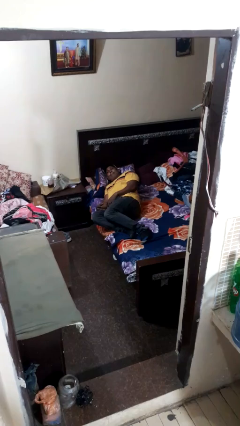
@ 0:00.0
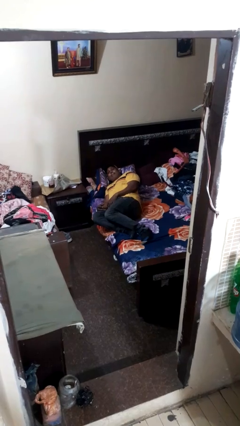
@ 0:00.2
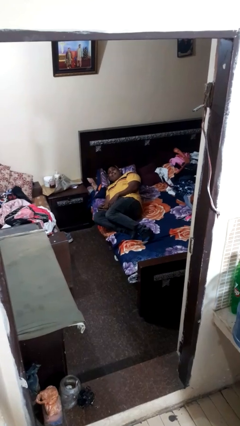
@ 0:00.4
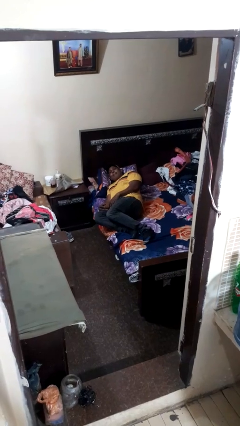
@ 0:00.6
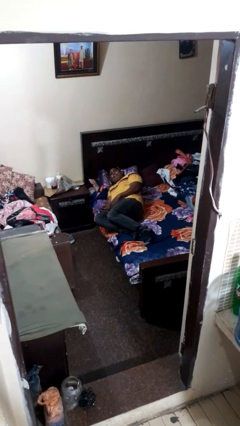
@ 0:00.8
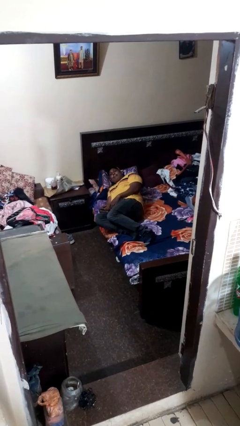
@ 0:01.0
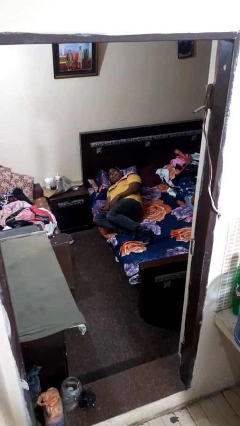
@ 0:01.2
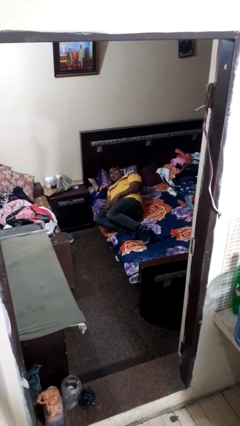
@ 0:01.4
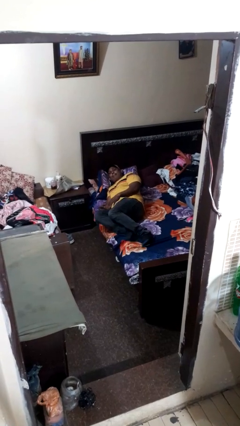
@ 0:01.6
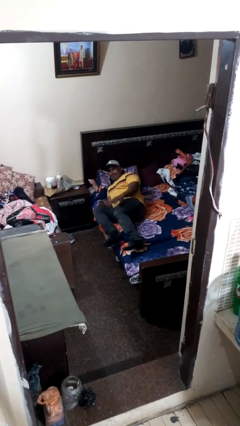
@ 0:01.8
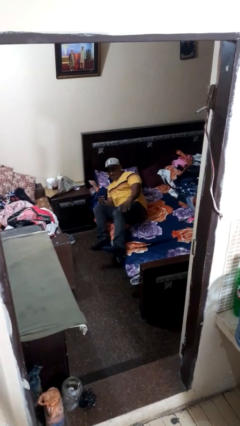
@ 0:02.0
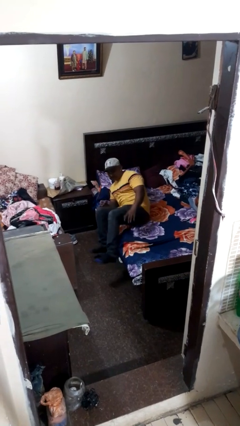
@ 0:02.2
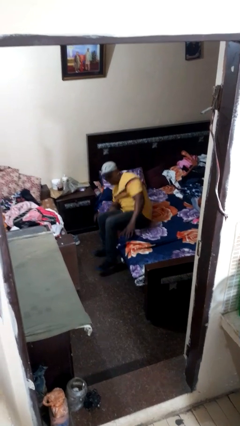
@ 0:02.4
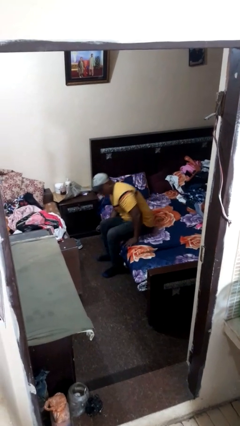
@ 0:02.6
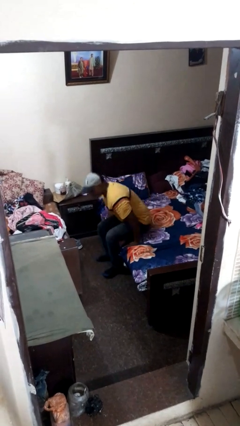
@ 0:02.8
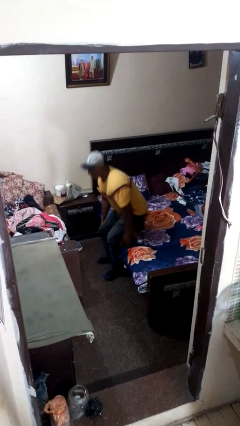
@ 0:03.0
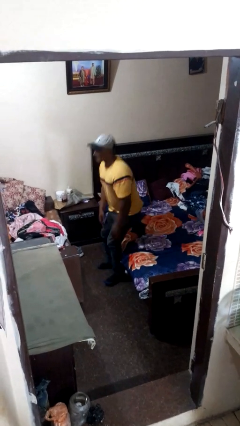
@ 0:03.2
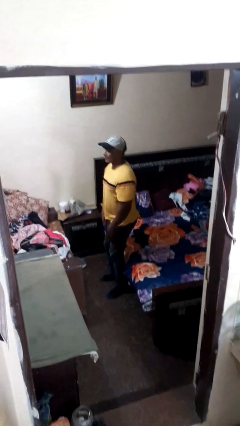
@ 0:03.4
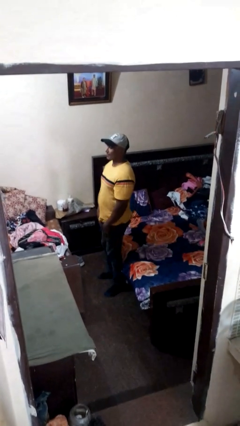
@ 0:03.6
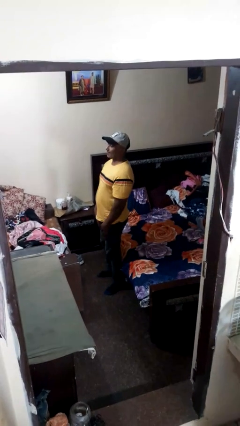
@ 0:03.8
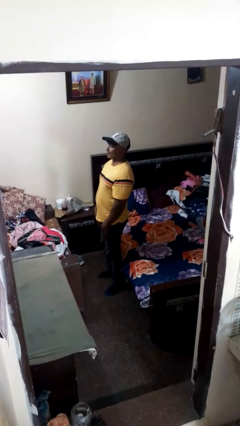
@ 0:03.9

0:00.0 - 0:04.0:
person stands up

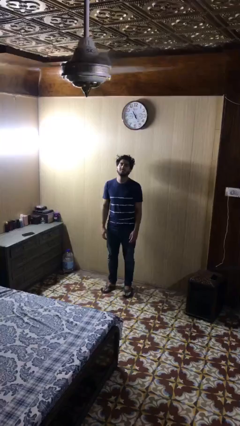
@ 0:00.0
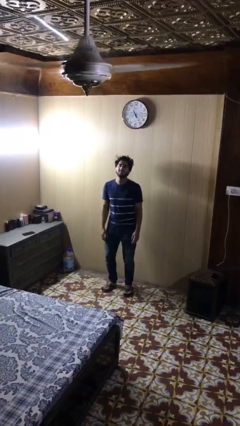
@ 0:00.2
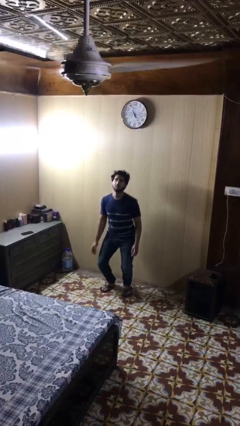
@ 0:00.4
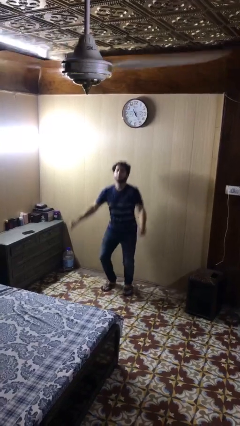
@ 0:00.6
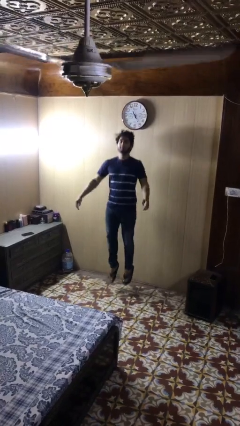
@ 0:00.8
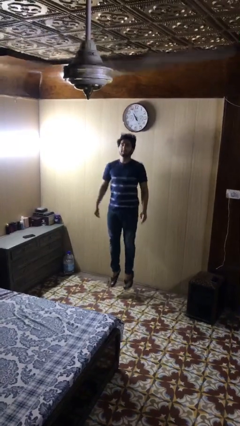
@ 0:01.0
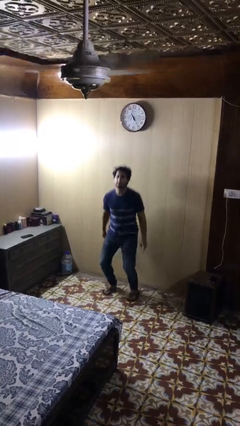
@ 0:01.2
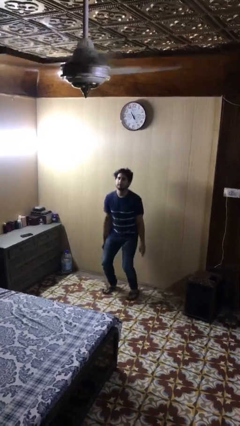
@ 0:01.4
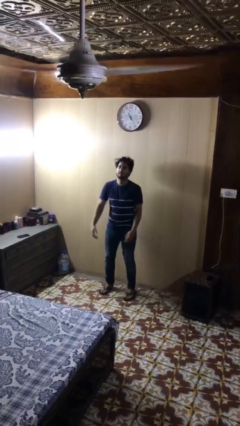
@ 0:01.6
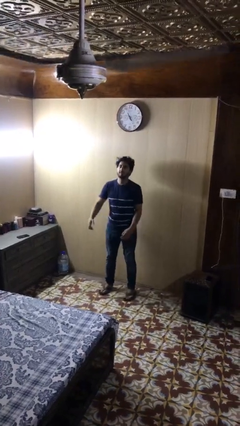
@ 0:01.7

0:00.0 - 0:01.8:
person jumps

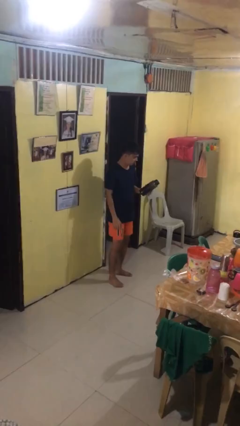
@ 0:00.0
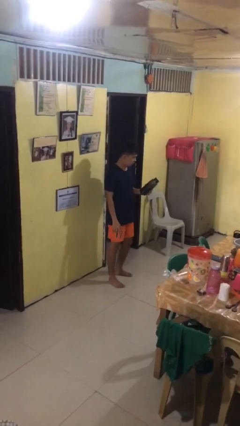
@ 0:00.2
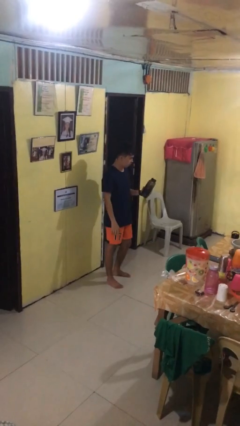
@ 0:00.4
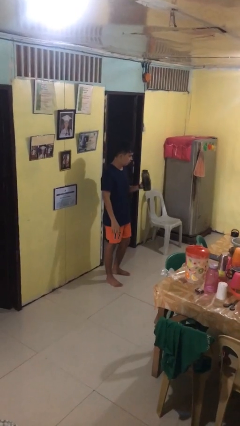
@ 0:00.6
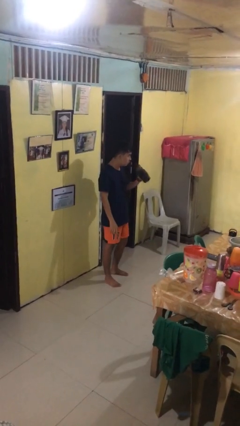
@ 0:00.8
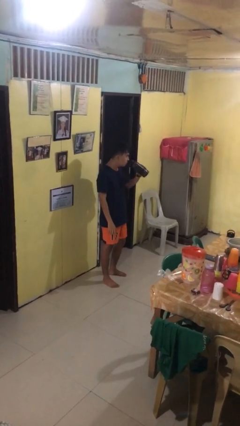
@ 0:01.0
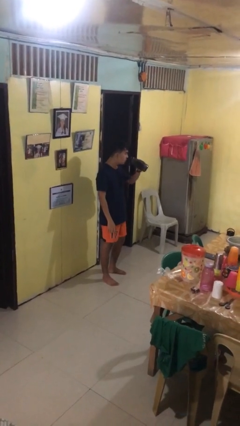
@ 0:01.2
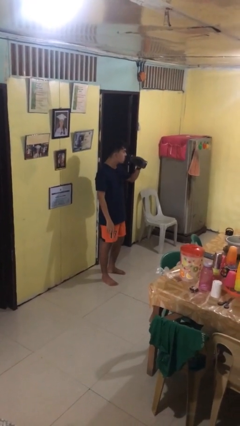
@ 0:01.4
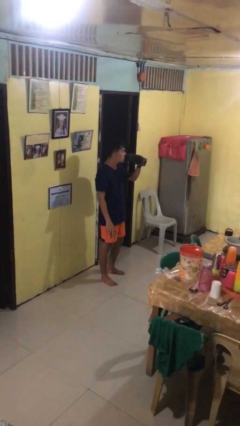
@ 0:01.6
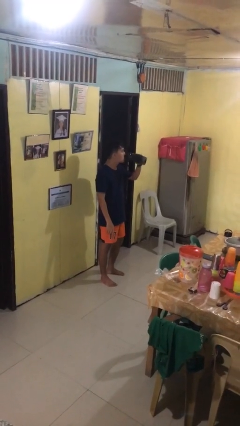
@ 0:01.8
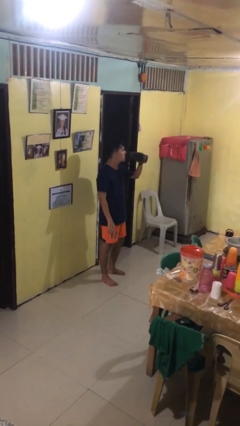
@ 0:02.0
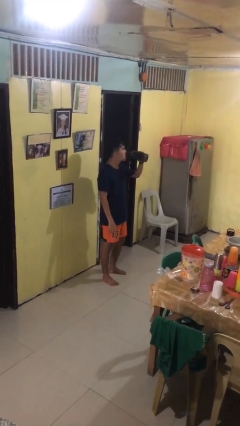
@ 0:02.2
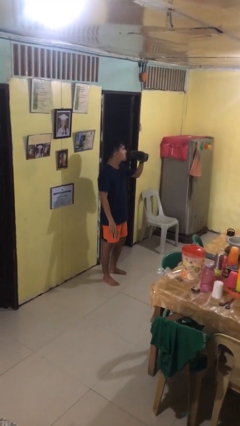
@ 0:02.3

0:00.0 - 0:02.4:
person drinks from bottle

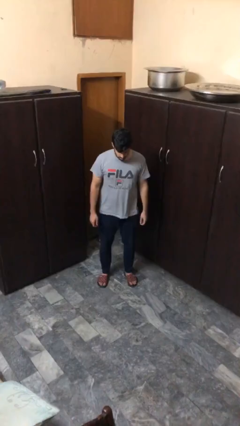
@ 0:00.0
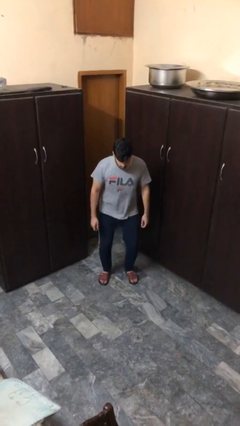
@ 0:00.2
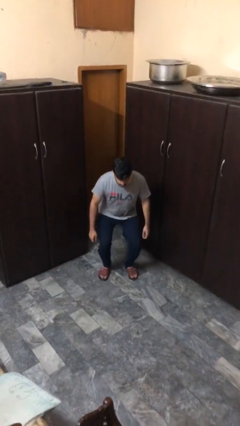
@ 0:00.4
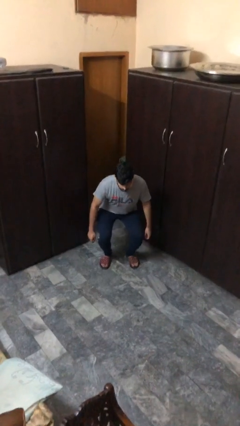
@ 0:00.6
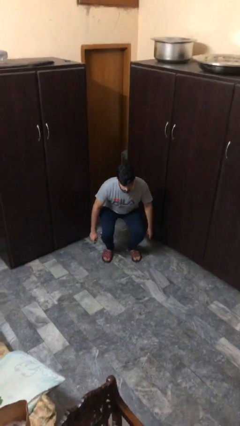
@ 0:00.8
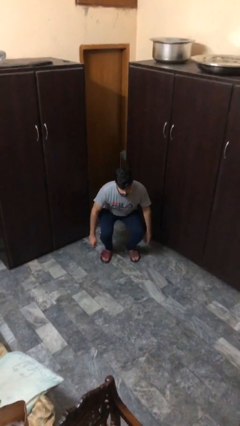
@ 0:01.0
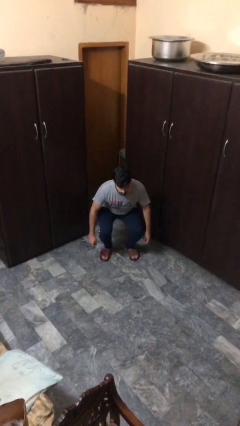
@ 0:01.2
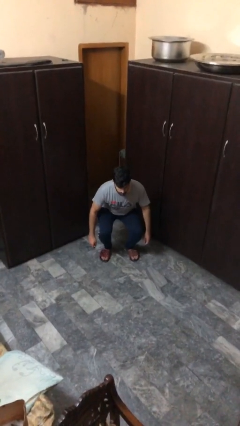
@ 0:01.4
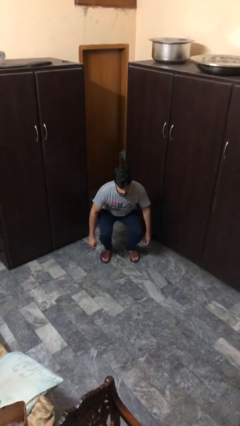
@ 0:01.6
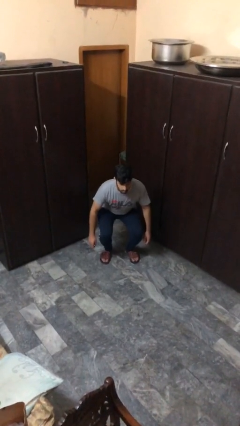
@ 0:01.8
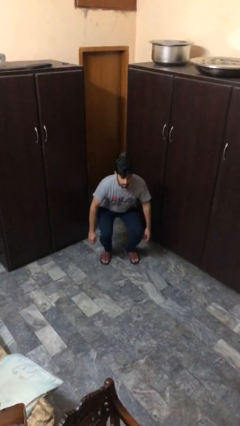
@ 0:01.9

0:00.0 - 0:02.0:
person squats

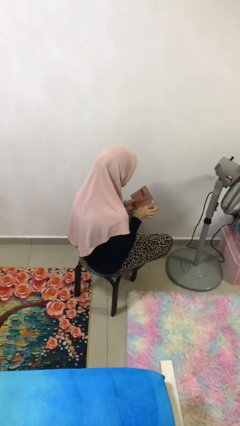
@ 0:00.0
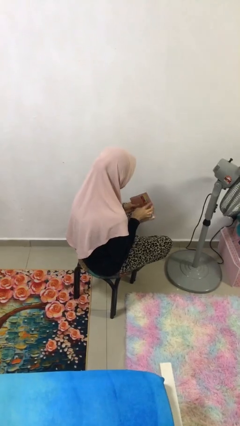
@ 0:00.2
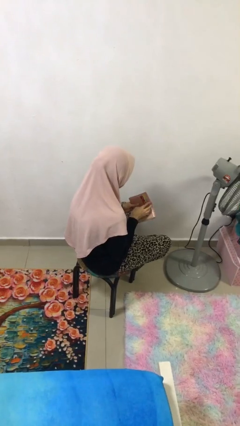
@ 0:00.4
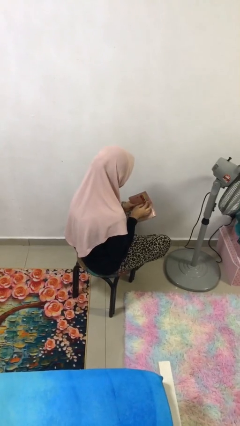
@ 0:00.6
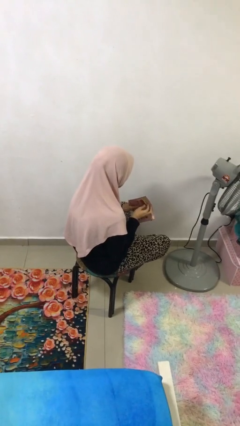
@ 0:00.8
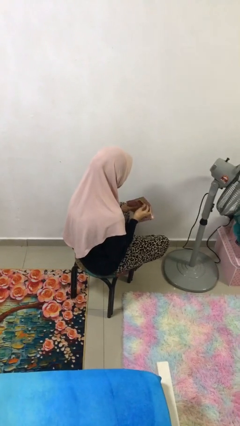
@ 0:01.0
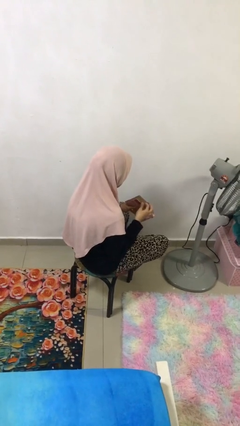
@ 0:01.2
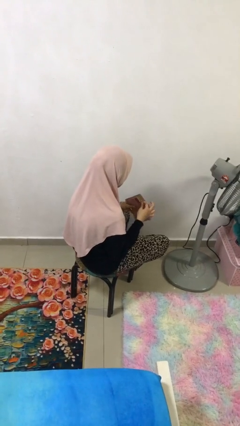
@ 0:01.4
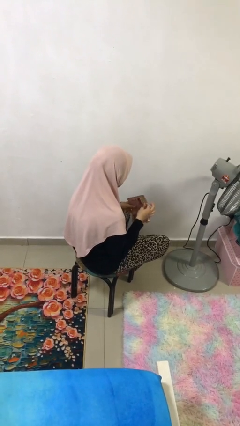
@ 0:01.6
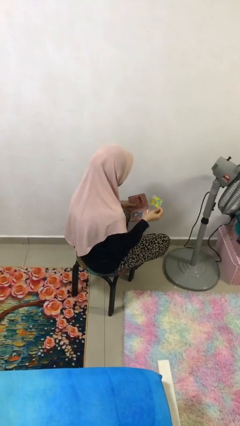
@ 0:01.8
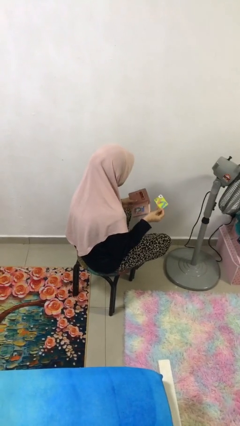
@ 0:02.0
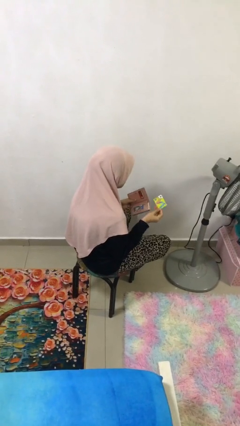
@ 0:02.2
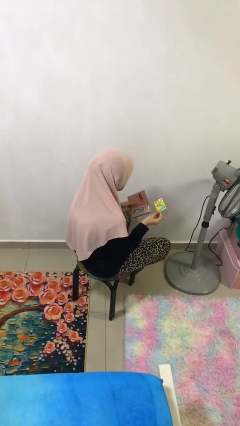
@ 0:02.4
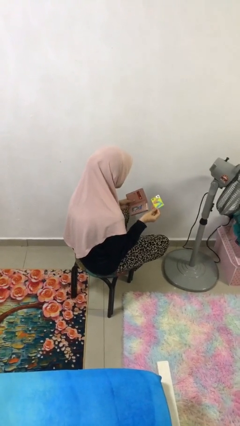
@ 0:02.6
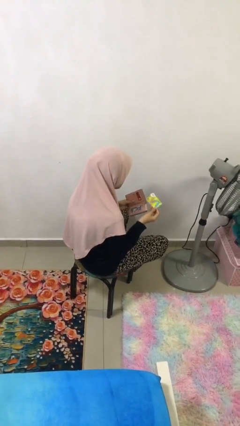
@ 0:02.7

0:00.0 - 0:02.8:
person takes object from purse

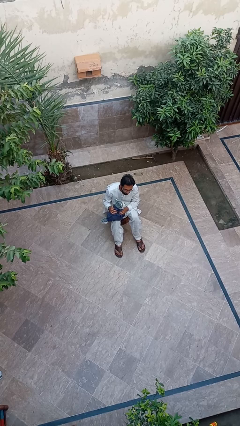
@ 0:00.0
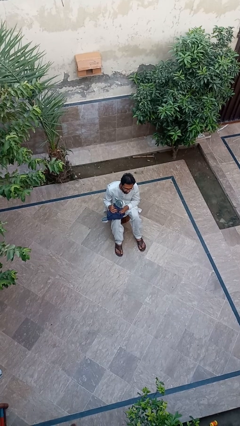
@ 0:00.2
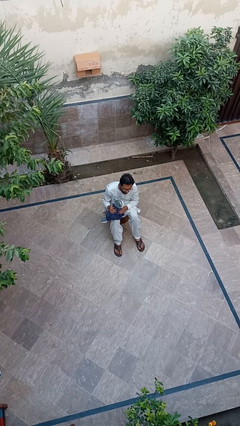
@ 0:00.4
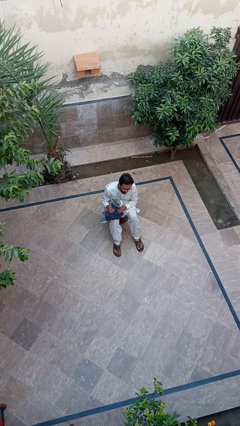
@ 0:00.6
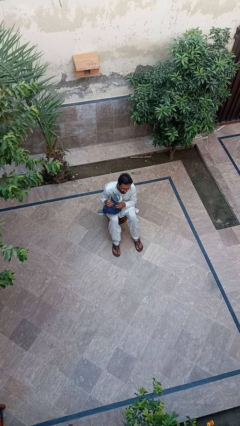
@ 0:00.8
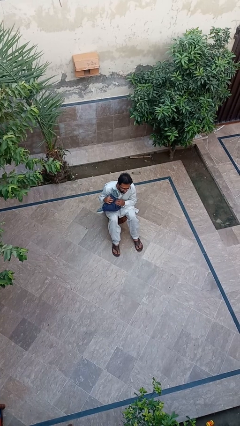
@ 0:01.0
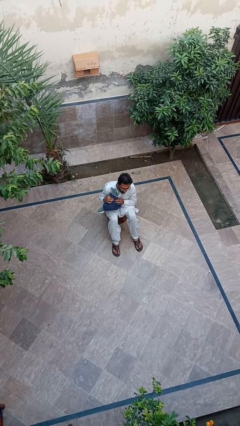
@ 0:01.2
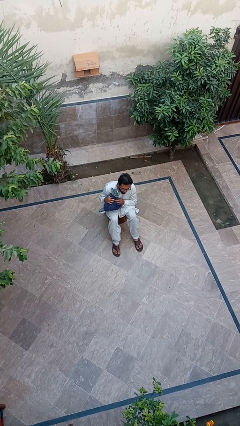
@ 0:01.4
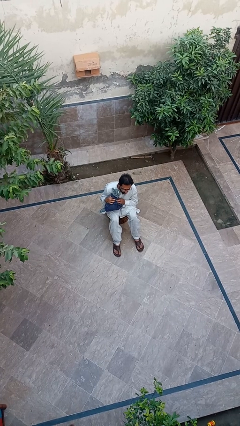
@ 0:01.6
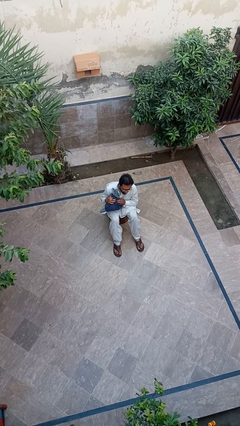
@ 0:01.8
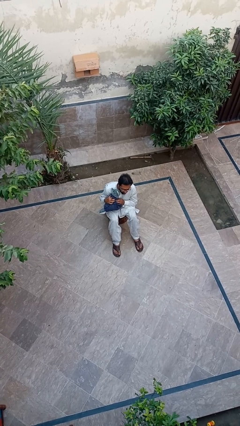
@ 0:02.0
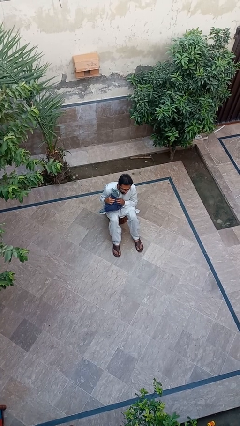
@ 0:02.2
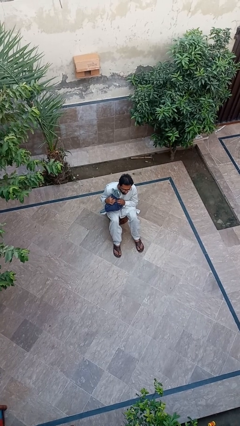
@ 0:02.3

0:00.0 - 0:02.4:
person hugs cat

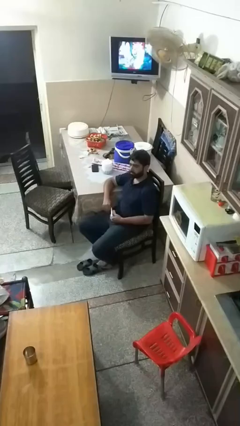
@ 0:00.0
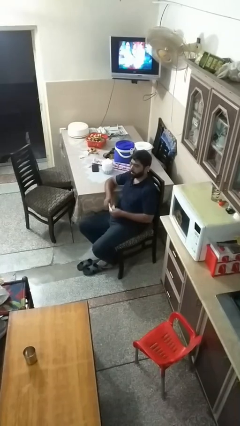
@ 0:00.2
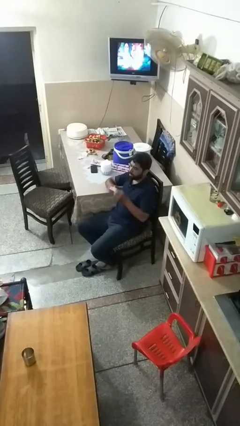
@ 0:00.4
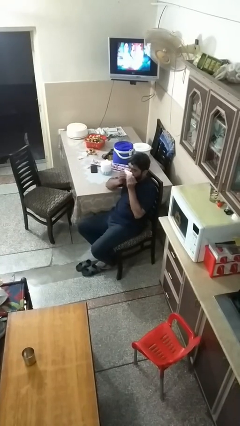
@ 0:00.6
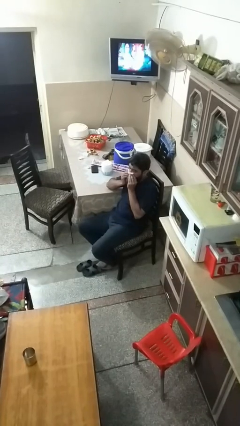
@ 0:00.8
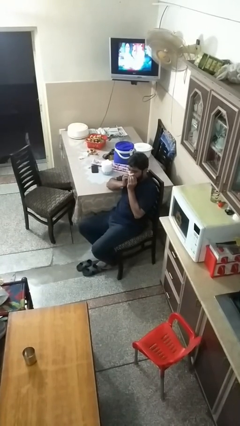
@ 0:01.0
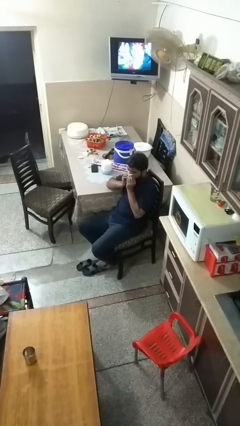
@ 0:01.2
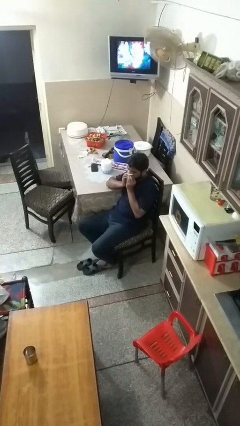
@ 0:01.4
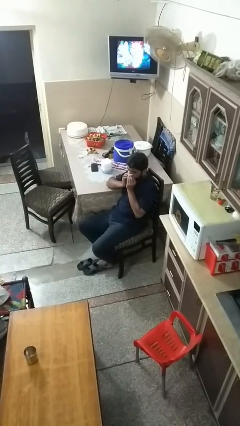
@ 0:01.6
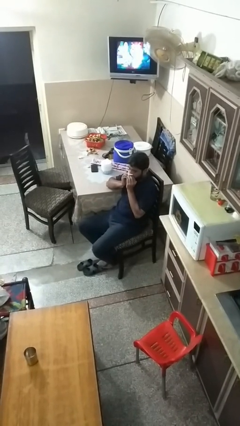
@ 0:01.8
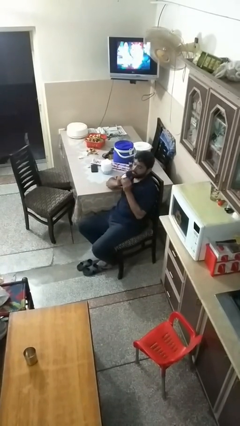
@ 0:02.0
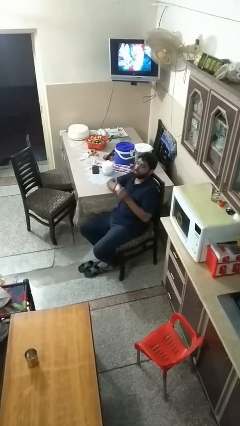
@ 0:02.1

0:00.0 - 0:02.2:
person blows nose
